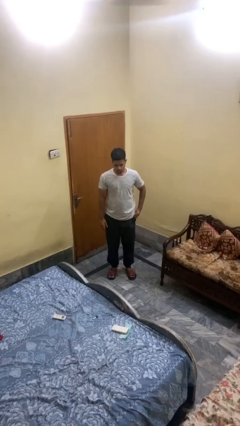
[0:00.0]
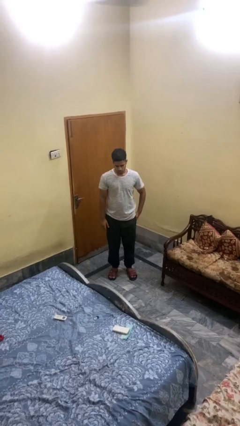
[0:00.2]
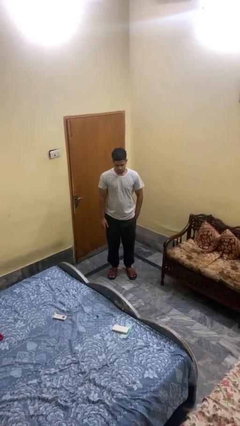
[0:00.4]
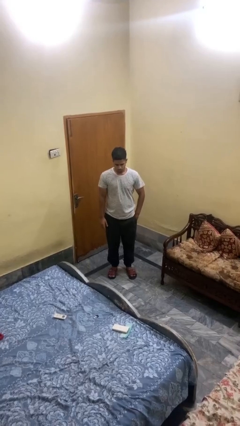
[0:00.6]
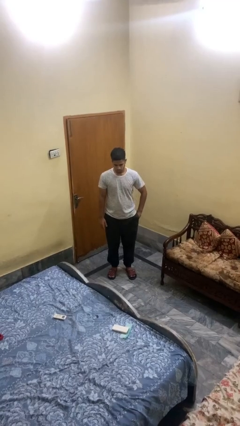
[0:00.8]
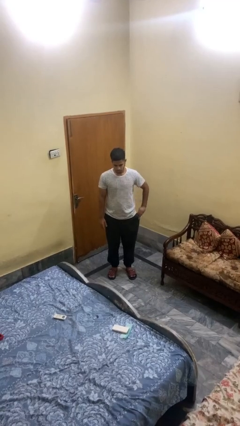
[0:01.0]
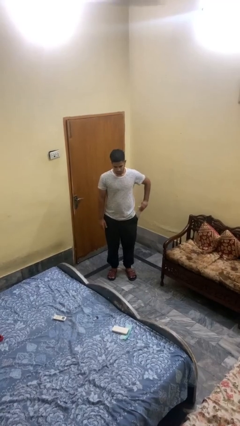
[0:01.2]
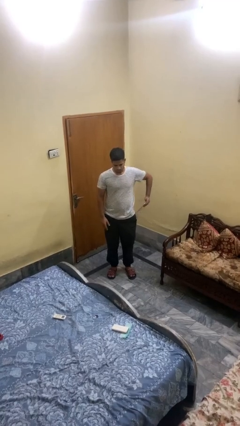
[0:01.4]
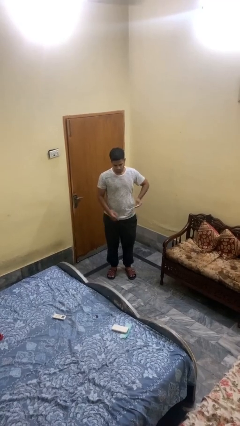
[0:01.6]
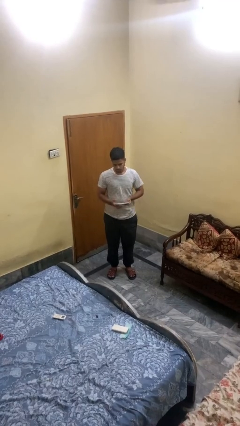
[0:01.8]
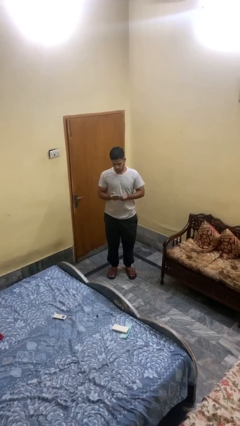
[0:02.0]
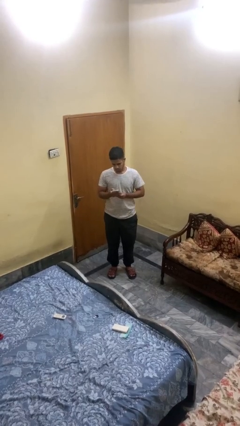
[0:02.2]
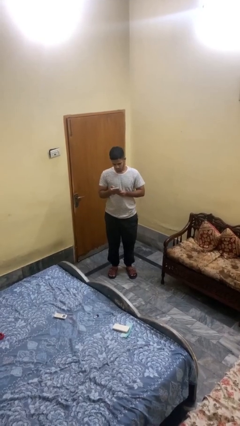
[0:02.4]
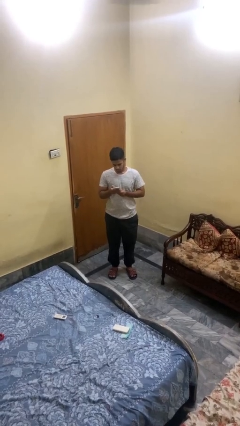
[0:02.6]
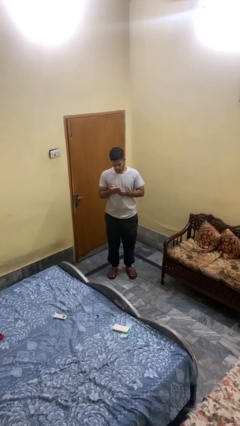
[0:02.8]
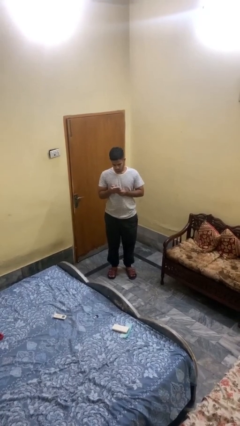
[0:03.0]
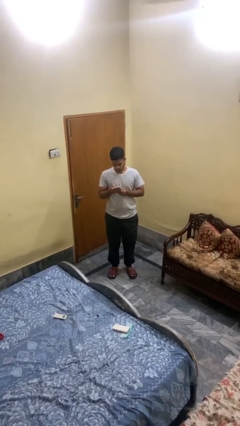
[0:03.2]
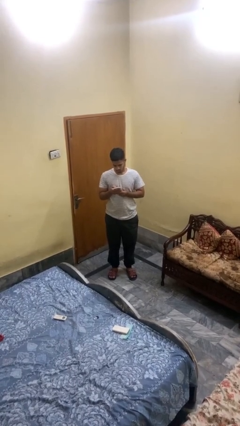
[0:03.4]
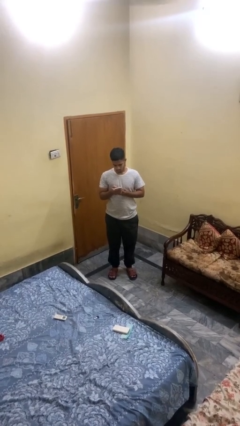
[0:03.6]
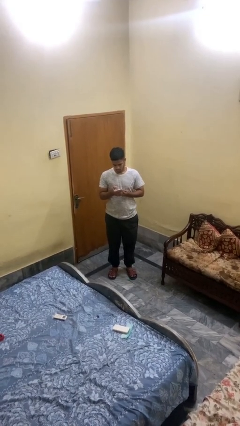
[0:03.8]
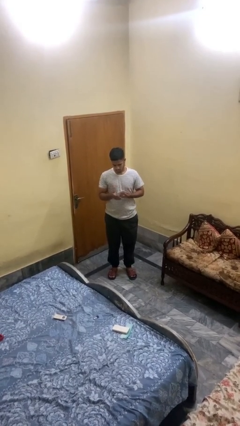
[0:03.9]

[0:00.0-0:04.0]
person takes phone from pocket

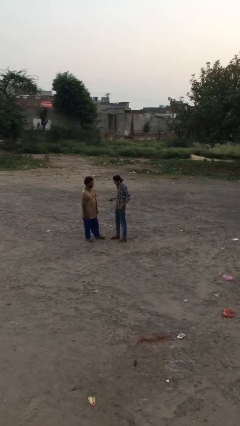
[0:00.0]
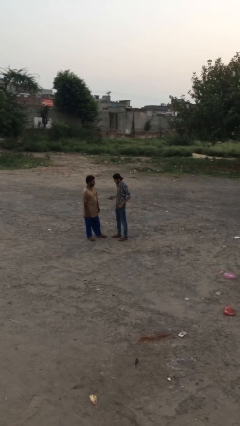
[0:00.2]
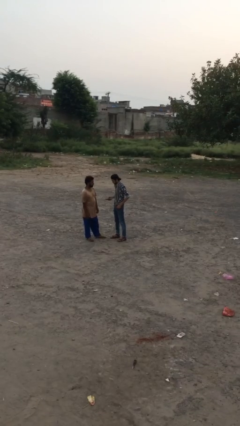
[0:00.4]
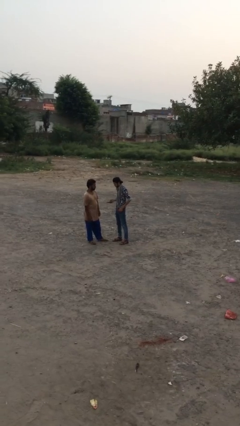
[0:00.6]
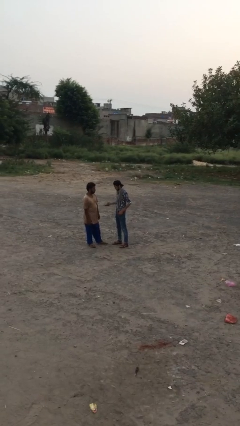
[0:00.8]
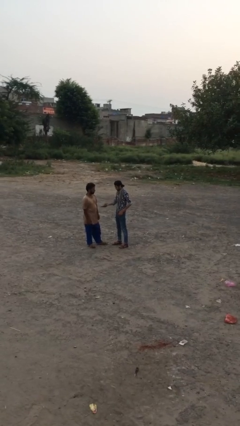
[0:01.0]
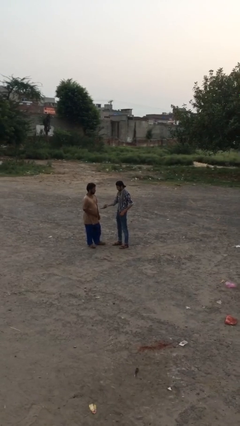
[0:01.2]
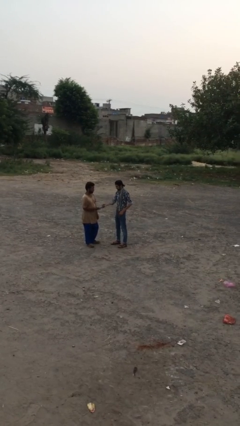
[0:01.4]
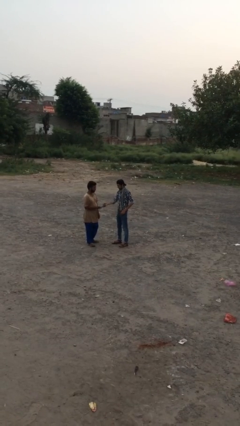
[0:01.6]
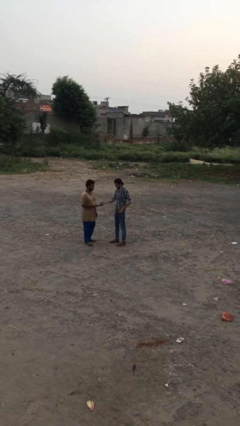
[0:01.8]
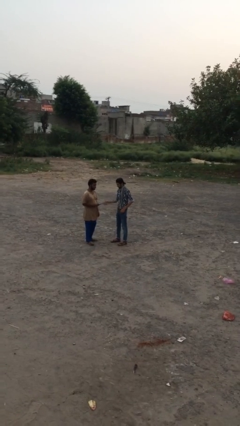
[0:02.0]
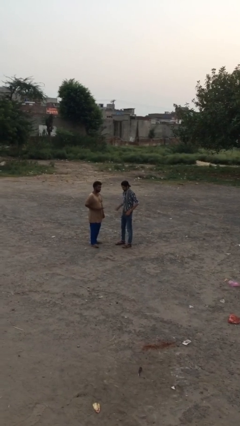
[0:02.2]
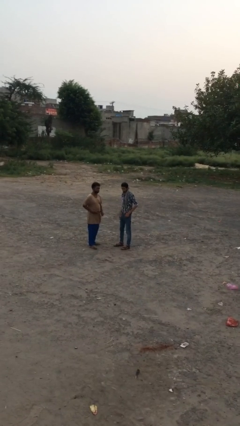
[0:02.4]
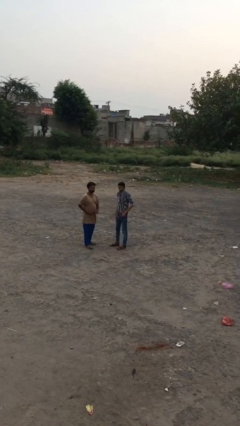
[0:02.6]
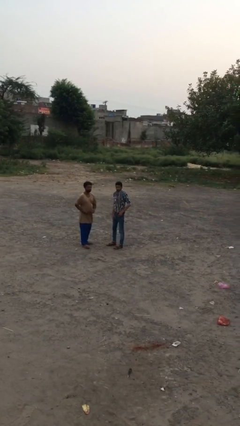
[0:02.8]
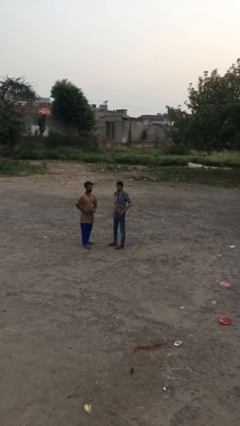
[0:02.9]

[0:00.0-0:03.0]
person transfers object to person

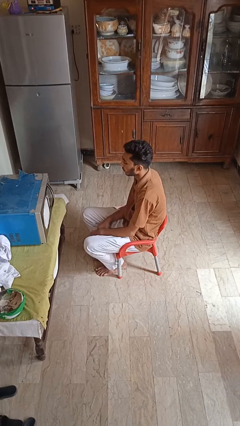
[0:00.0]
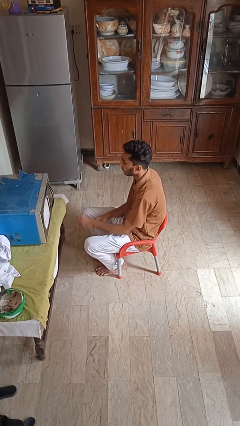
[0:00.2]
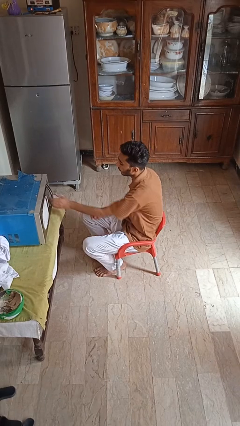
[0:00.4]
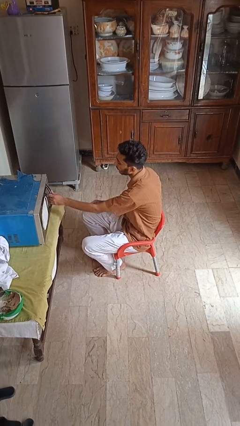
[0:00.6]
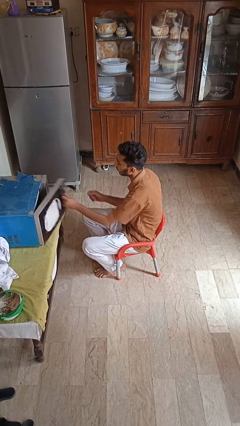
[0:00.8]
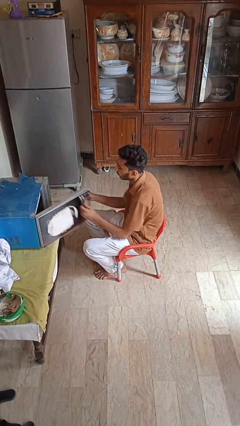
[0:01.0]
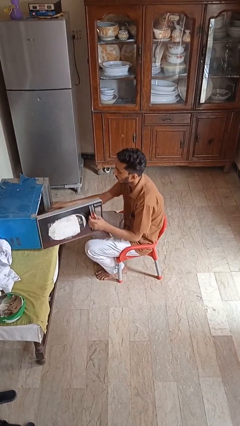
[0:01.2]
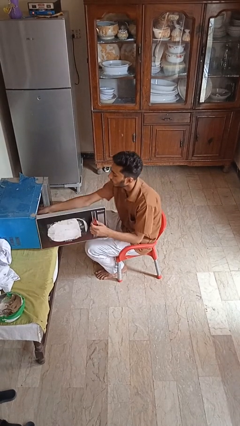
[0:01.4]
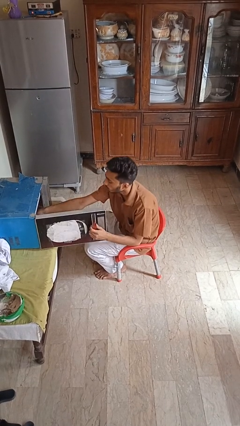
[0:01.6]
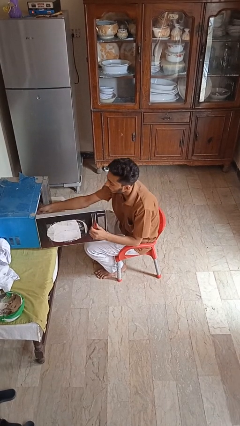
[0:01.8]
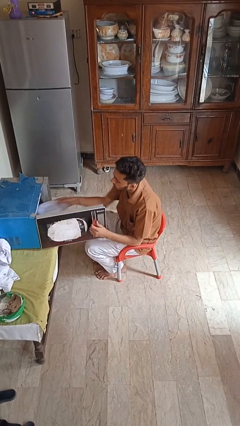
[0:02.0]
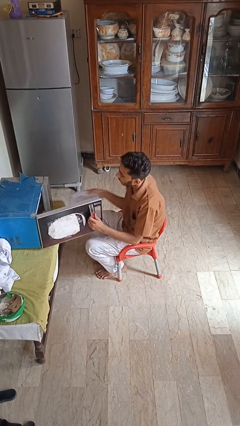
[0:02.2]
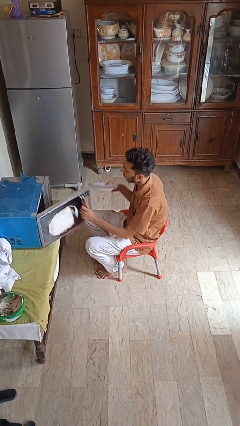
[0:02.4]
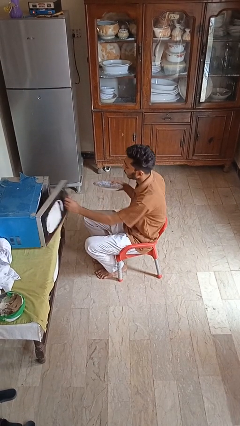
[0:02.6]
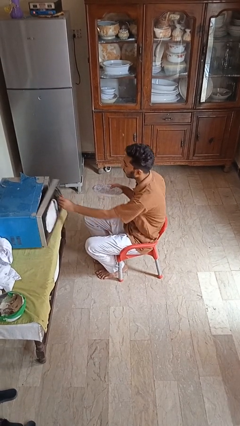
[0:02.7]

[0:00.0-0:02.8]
person takes object from microwave

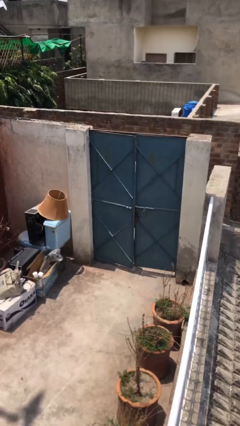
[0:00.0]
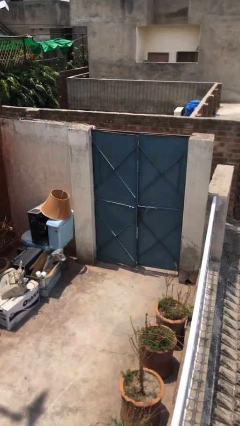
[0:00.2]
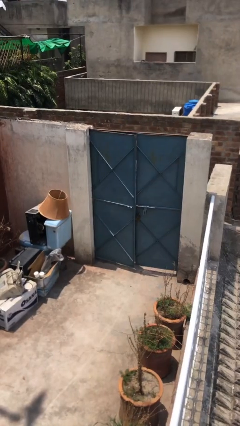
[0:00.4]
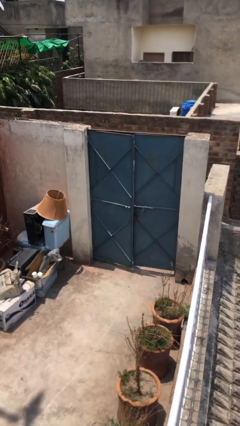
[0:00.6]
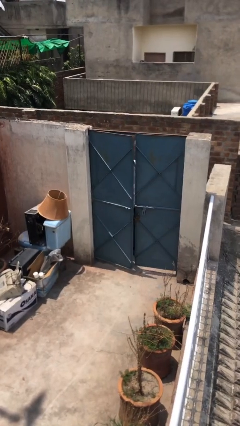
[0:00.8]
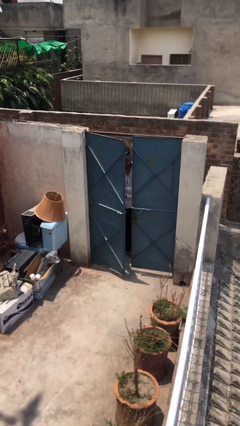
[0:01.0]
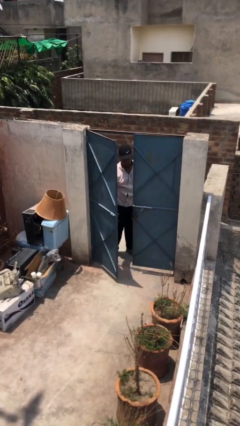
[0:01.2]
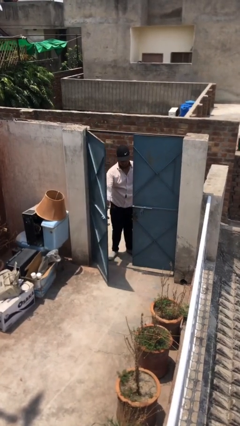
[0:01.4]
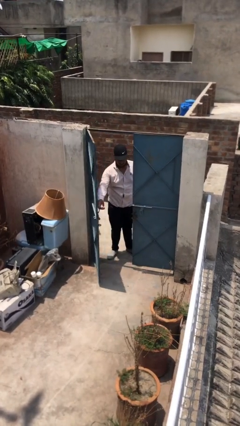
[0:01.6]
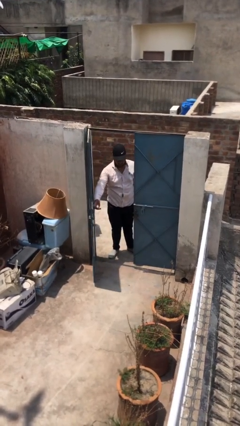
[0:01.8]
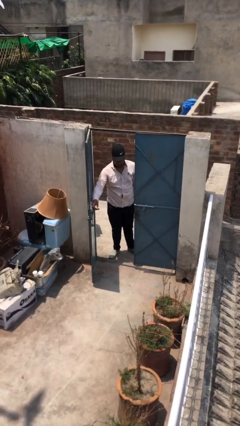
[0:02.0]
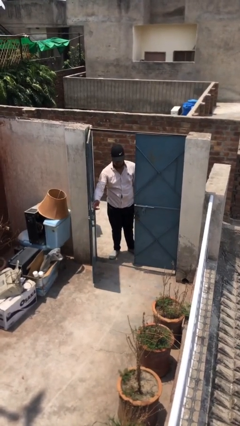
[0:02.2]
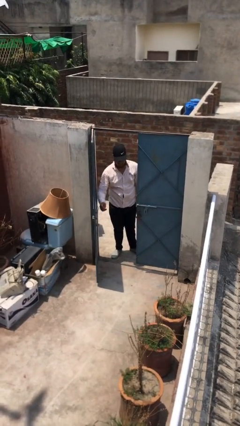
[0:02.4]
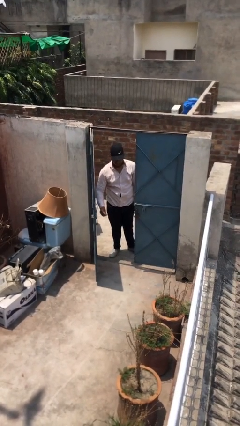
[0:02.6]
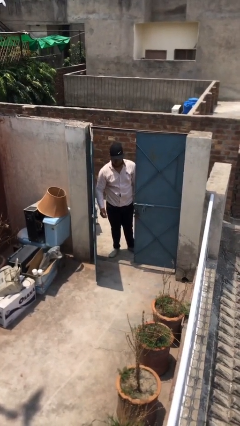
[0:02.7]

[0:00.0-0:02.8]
person opens facility door

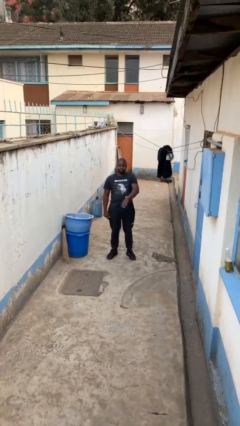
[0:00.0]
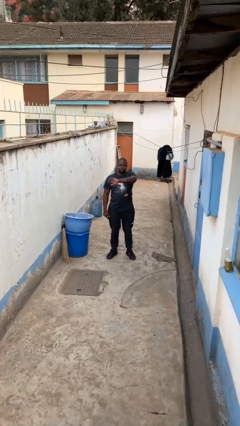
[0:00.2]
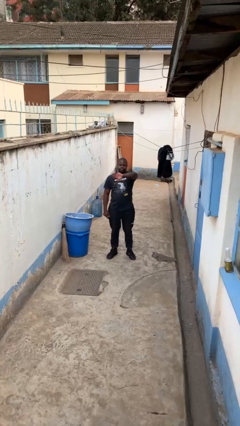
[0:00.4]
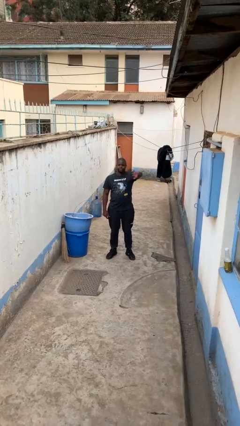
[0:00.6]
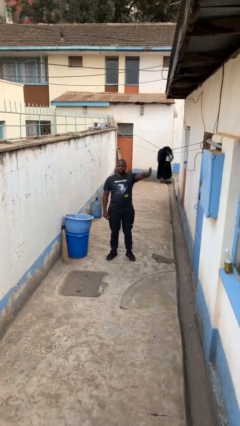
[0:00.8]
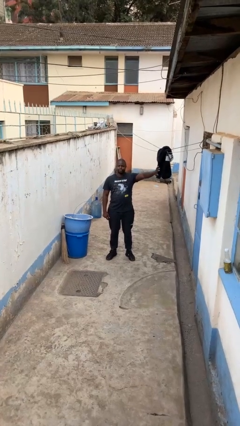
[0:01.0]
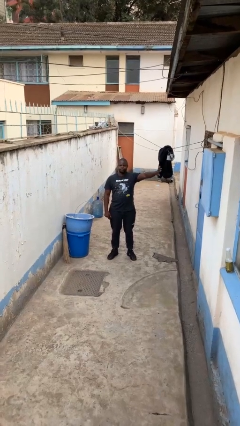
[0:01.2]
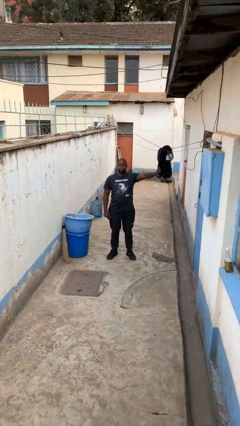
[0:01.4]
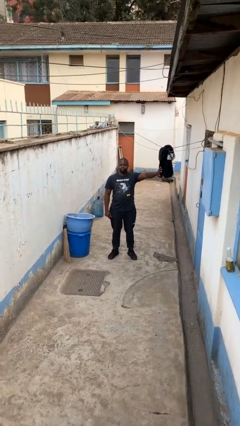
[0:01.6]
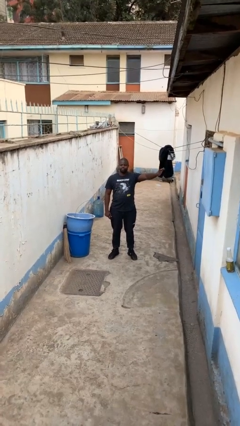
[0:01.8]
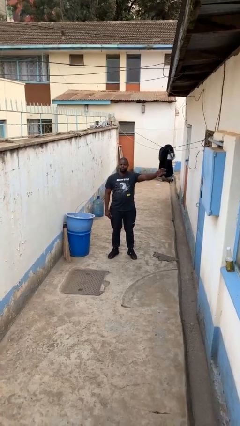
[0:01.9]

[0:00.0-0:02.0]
person gestures swipe left

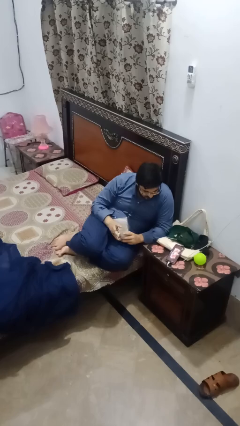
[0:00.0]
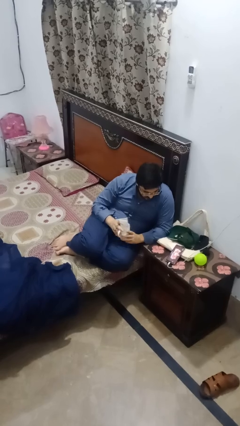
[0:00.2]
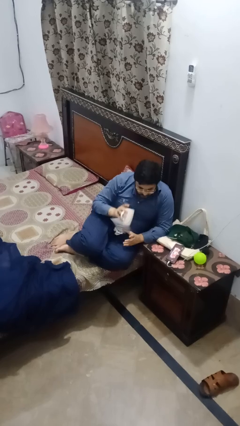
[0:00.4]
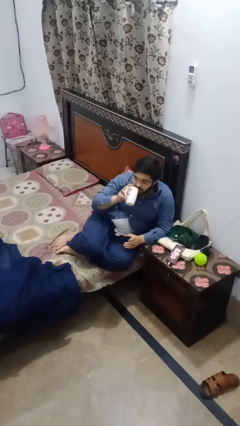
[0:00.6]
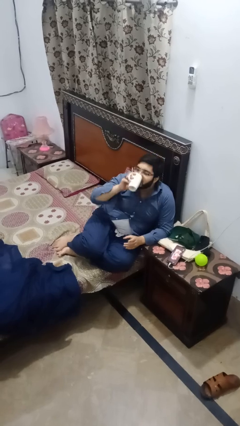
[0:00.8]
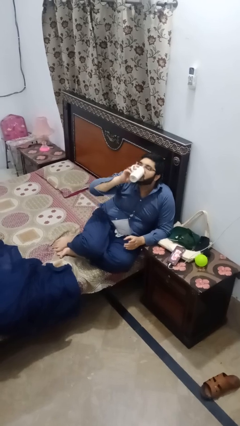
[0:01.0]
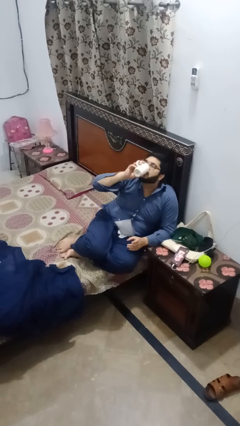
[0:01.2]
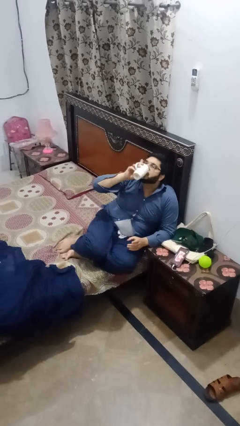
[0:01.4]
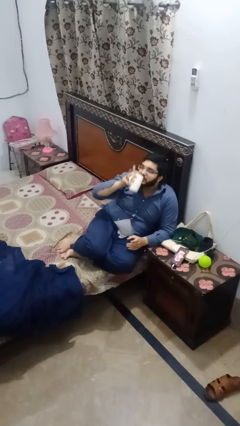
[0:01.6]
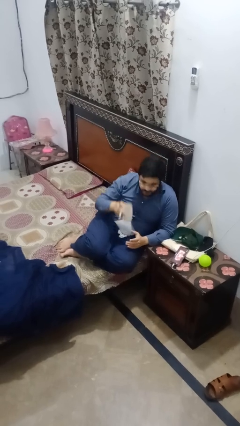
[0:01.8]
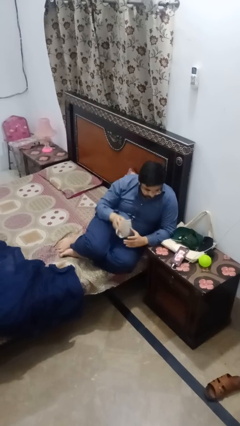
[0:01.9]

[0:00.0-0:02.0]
person drinks from mug

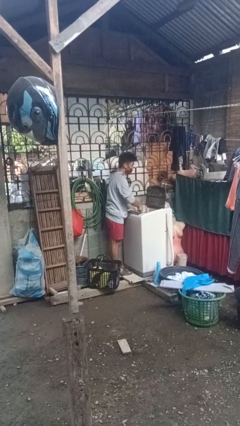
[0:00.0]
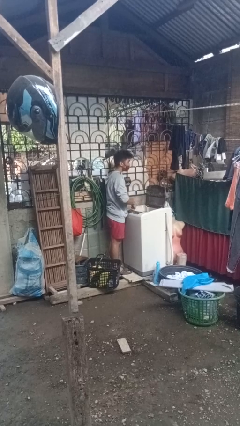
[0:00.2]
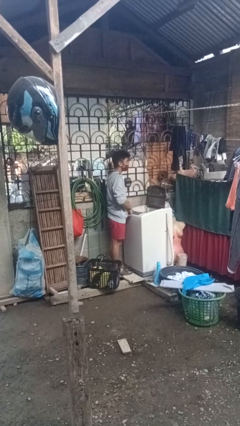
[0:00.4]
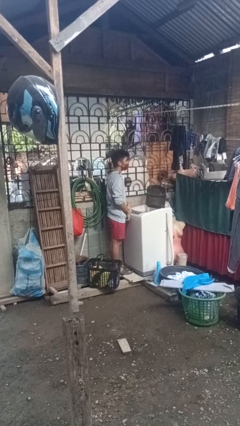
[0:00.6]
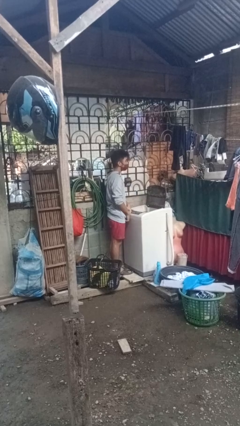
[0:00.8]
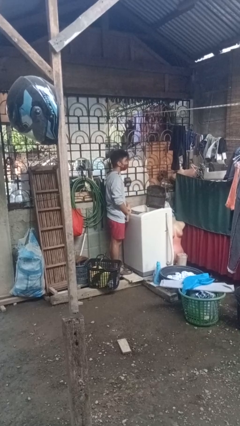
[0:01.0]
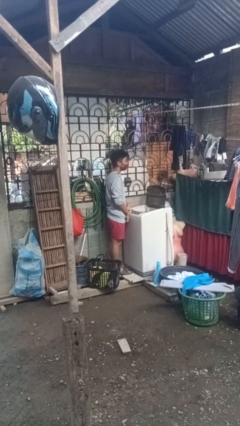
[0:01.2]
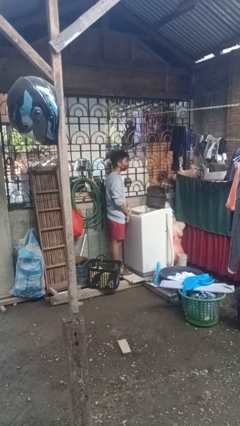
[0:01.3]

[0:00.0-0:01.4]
person loads dryer
